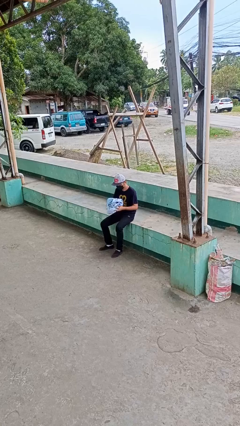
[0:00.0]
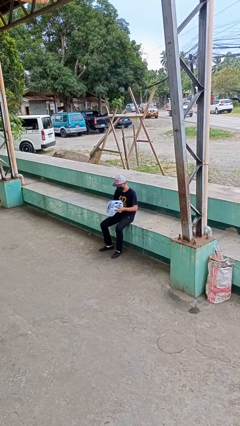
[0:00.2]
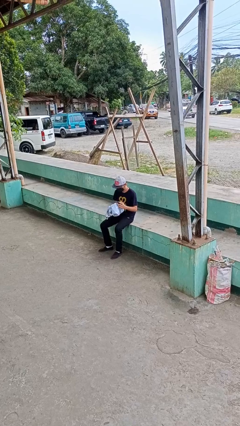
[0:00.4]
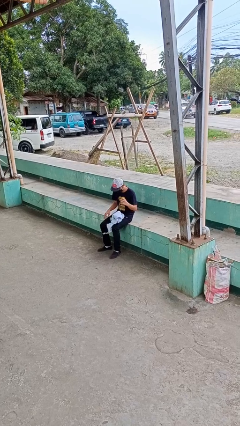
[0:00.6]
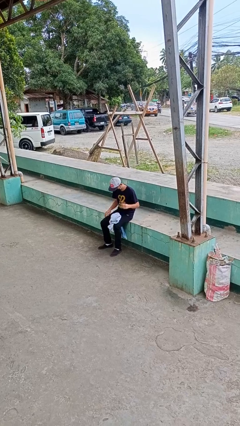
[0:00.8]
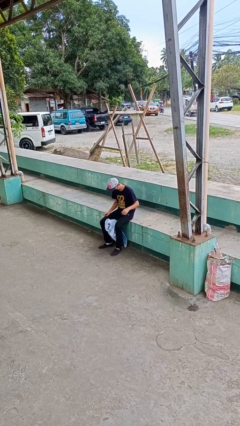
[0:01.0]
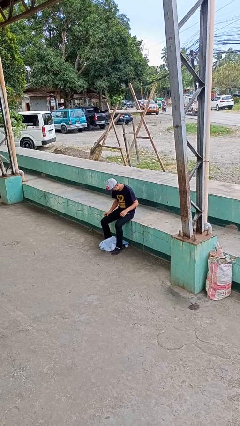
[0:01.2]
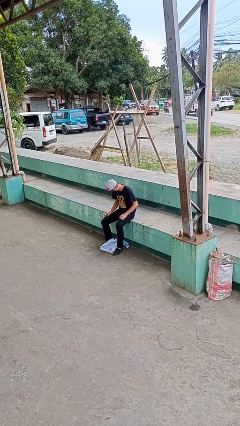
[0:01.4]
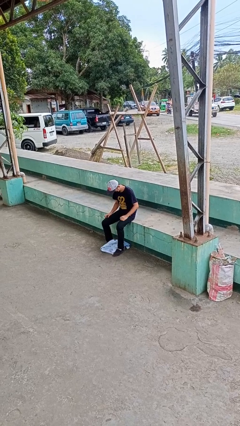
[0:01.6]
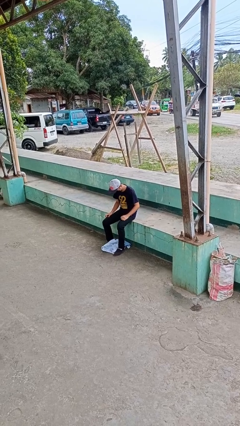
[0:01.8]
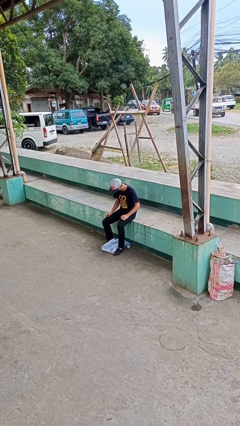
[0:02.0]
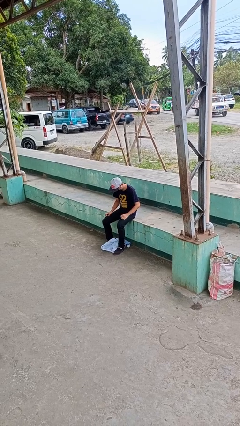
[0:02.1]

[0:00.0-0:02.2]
person drops object

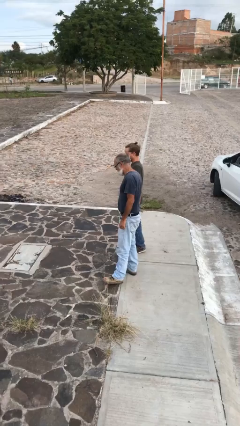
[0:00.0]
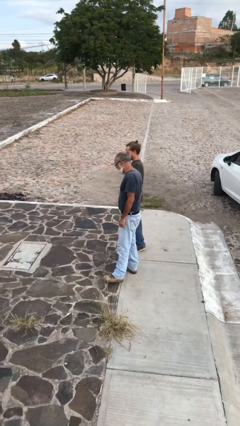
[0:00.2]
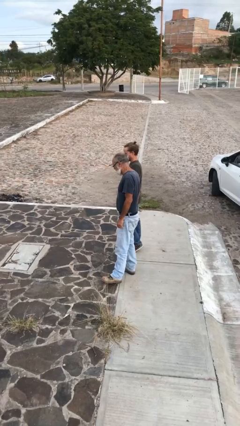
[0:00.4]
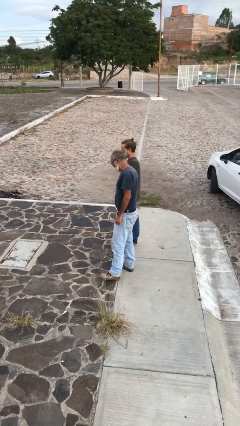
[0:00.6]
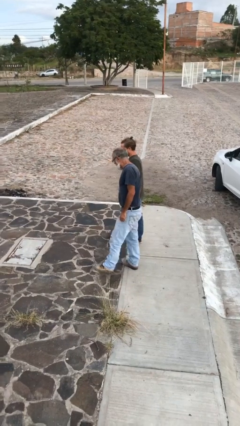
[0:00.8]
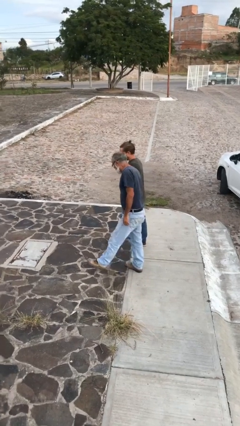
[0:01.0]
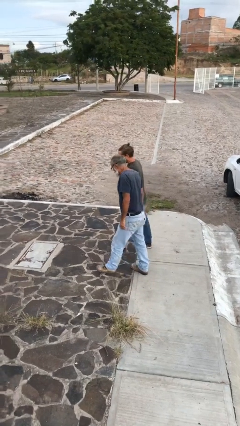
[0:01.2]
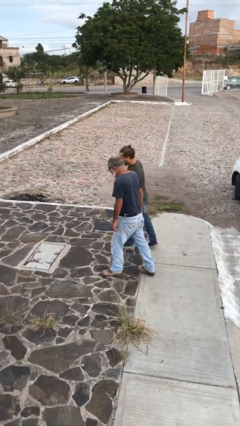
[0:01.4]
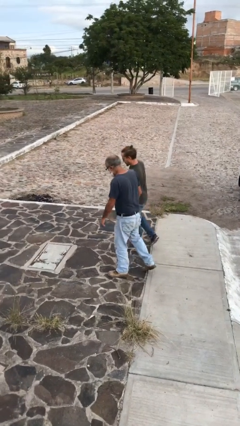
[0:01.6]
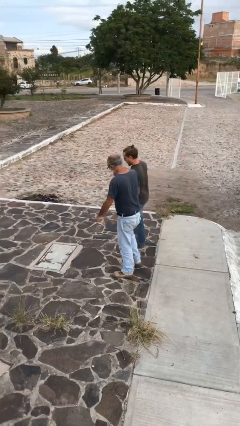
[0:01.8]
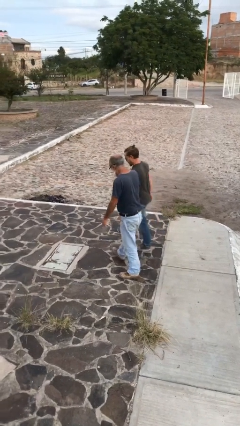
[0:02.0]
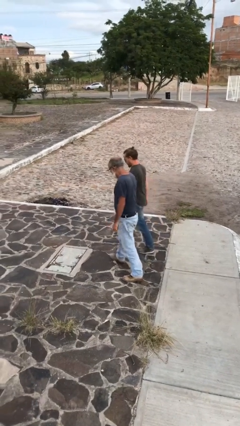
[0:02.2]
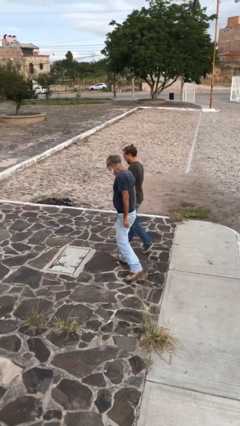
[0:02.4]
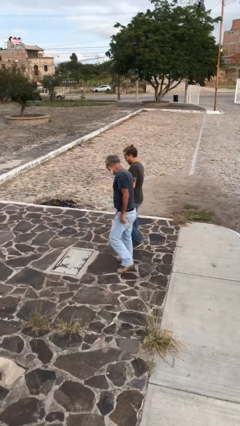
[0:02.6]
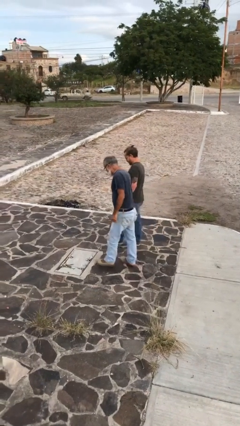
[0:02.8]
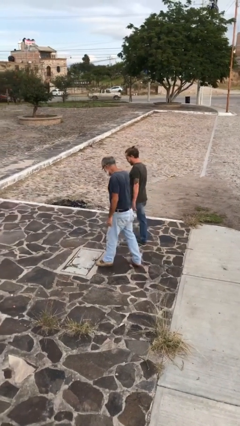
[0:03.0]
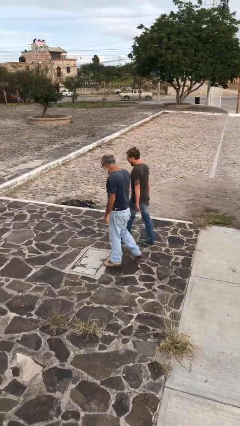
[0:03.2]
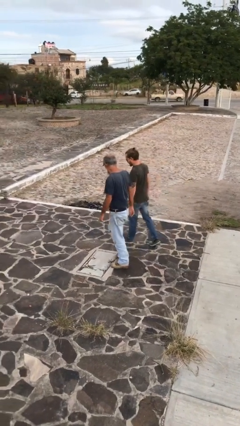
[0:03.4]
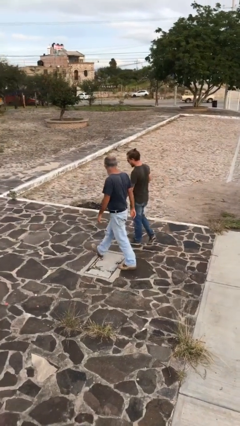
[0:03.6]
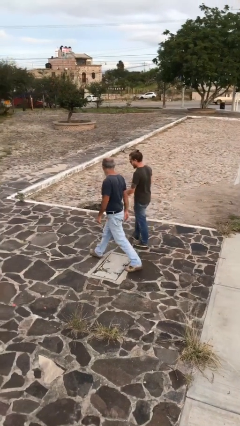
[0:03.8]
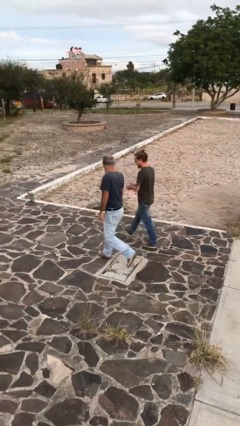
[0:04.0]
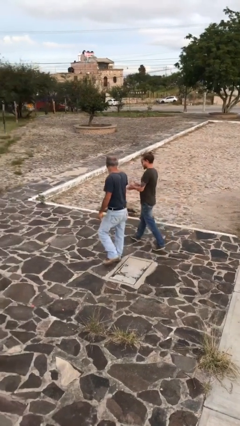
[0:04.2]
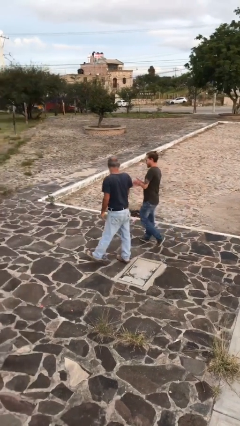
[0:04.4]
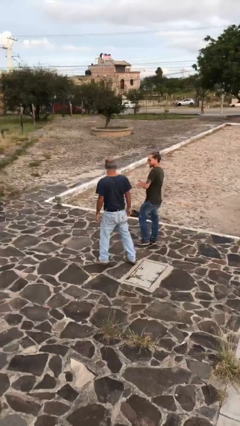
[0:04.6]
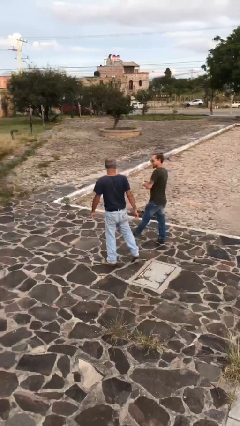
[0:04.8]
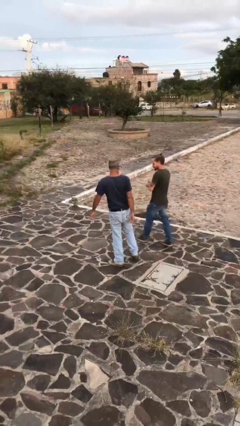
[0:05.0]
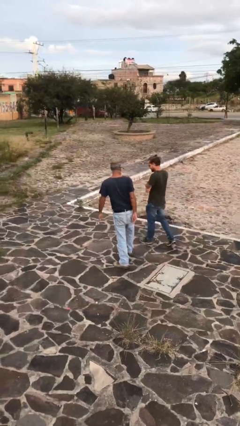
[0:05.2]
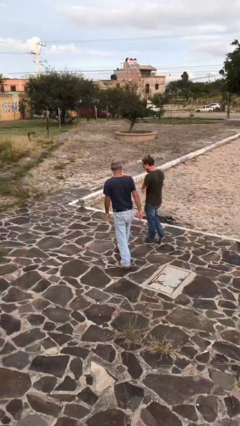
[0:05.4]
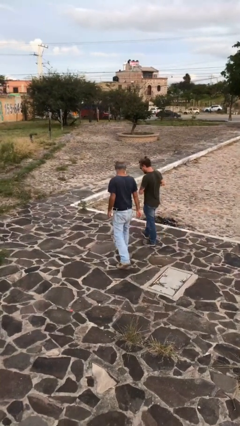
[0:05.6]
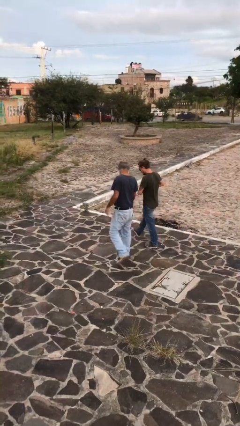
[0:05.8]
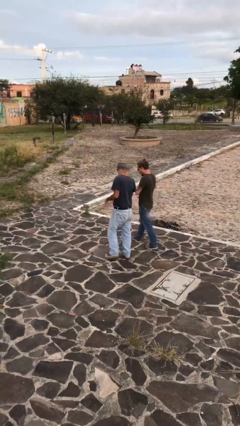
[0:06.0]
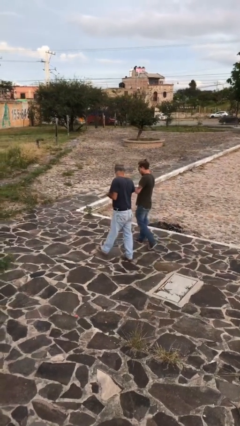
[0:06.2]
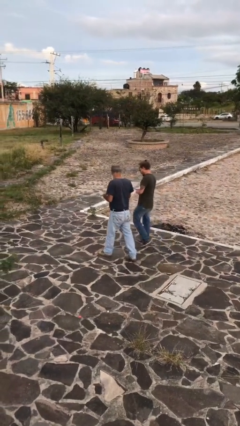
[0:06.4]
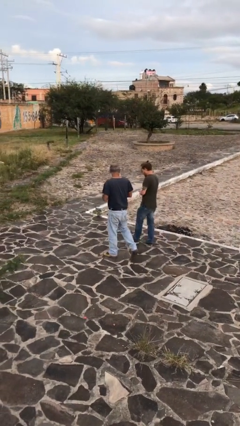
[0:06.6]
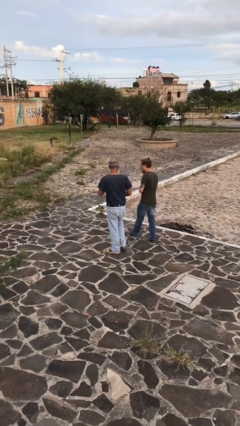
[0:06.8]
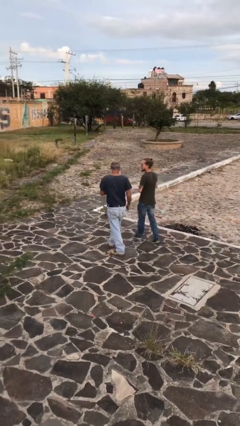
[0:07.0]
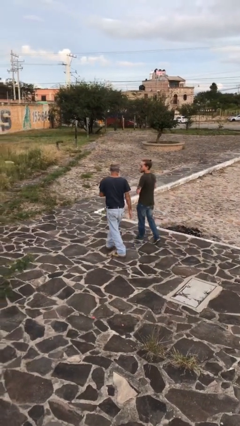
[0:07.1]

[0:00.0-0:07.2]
person talks to person

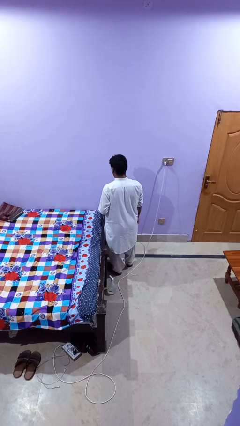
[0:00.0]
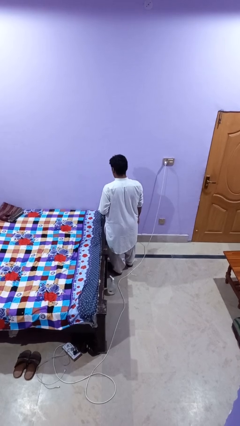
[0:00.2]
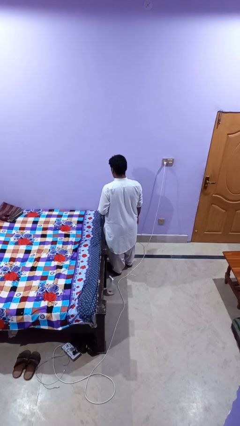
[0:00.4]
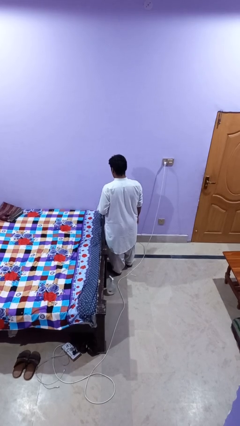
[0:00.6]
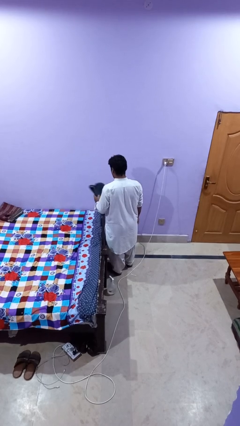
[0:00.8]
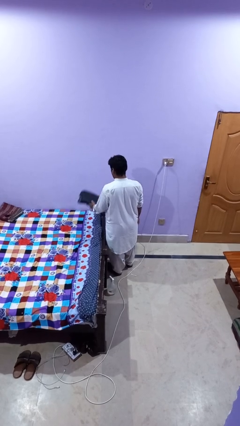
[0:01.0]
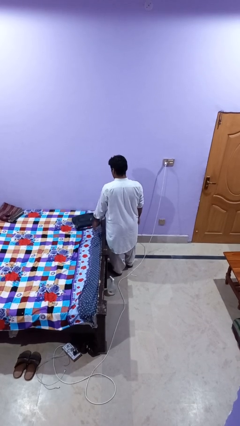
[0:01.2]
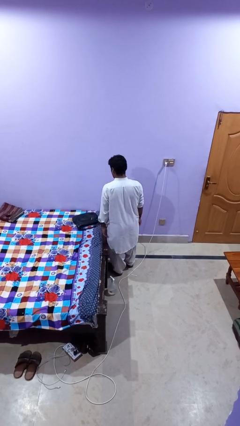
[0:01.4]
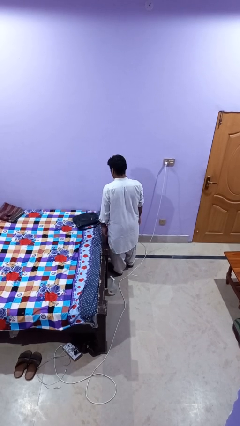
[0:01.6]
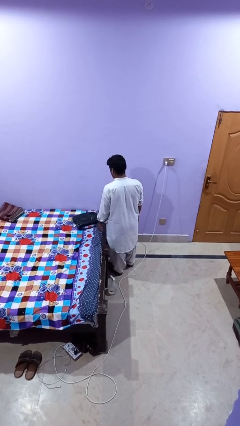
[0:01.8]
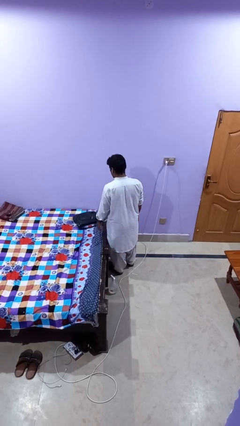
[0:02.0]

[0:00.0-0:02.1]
person throws object on bed

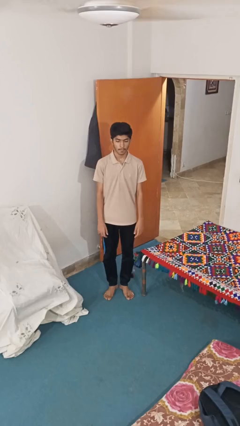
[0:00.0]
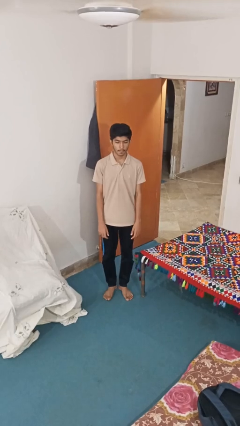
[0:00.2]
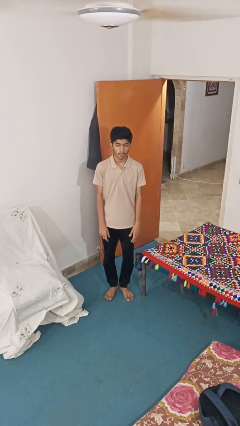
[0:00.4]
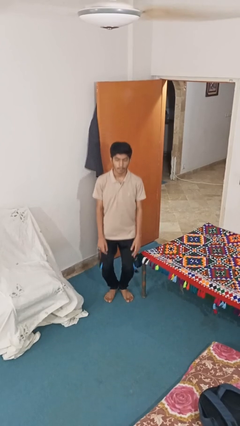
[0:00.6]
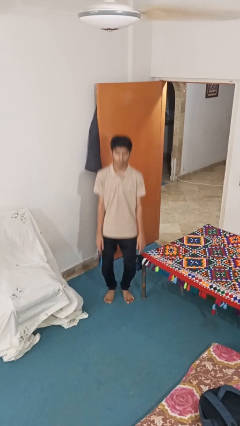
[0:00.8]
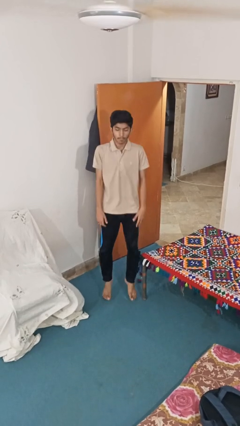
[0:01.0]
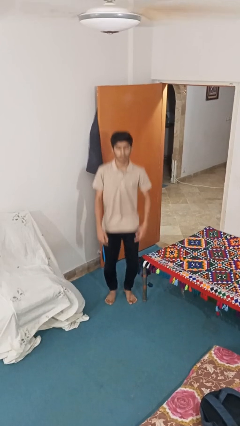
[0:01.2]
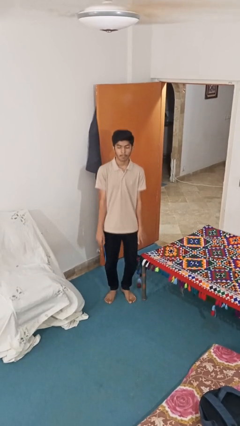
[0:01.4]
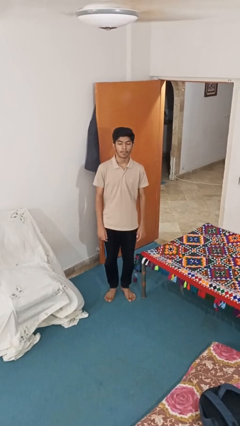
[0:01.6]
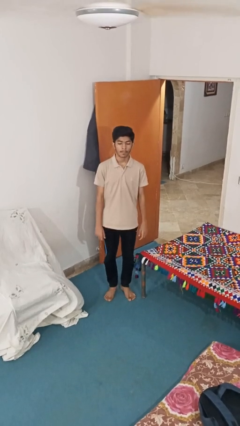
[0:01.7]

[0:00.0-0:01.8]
person jumps

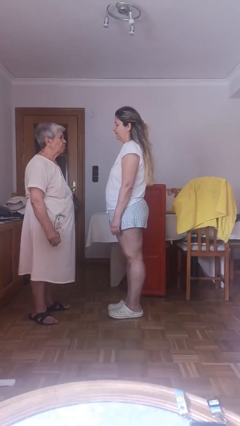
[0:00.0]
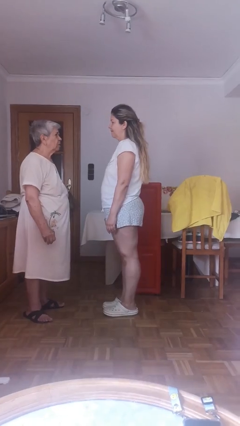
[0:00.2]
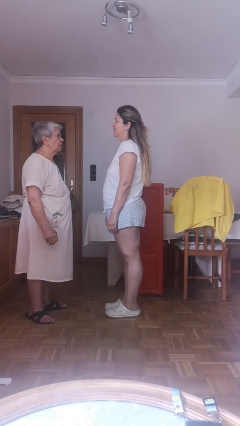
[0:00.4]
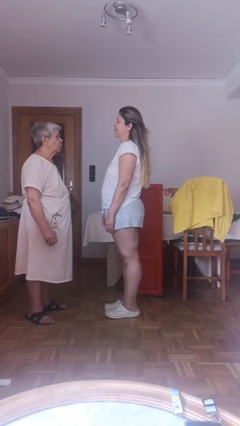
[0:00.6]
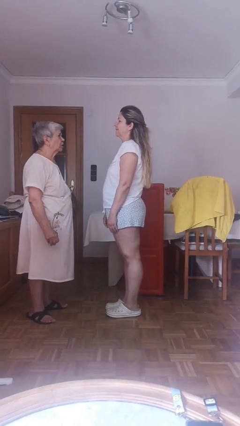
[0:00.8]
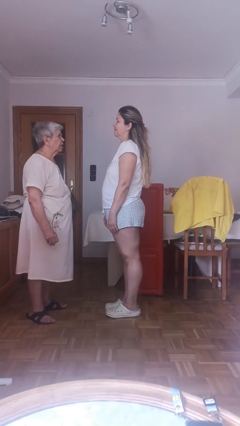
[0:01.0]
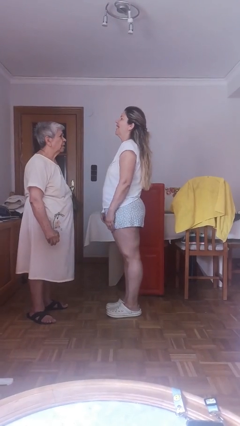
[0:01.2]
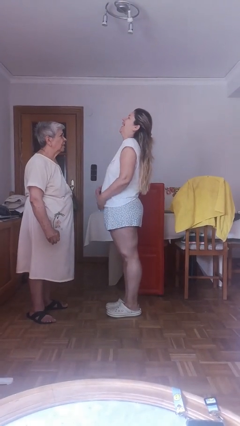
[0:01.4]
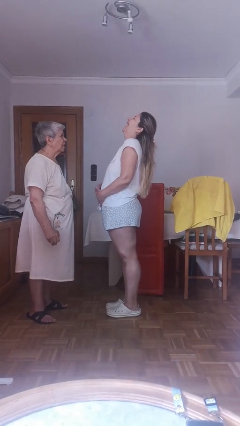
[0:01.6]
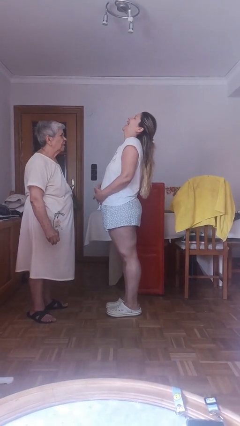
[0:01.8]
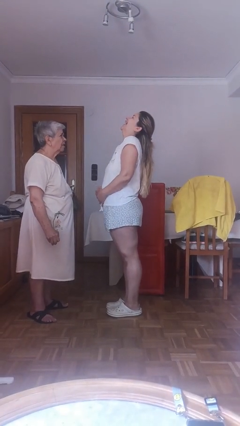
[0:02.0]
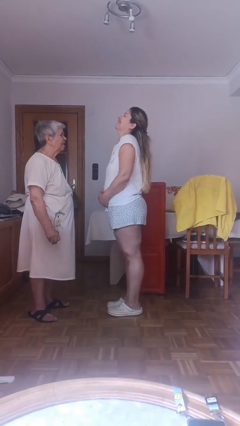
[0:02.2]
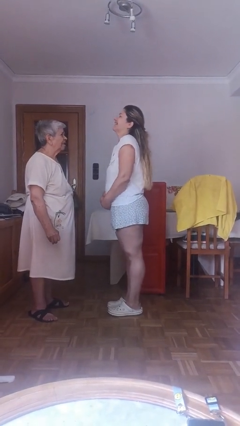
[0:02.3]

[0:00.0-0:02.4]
person laughs with person

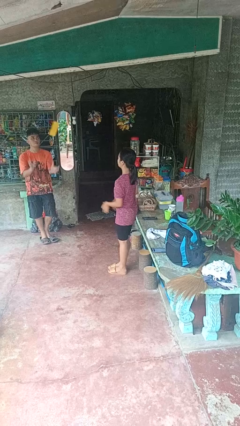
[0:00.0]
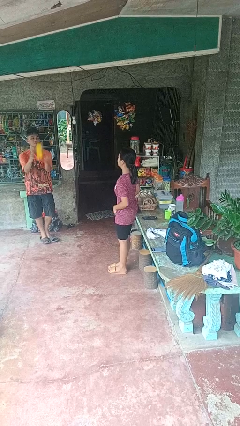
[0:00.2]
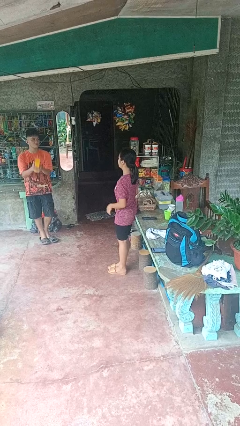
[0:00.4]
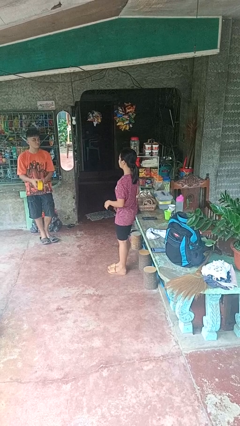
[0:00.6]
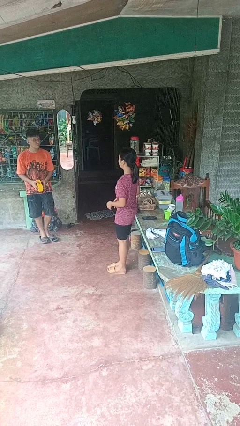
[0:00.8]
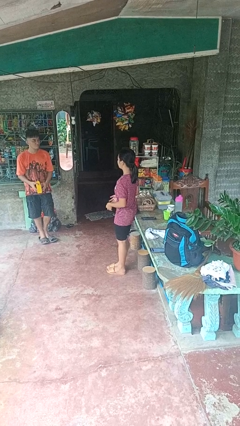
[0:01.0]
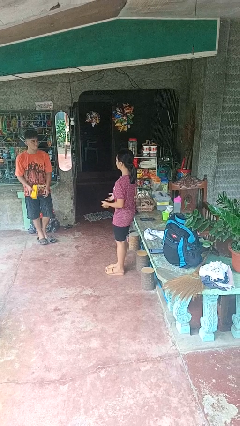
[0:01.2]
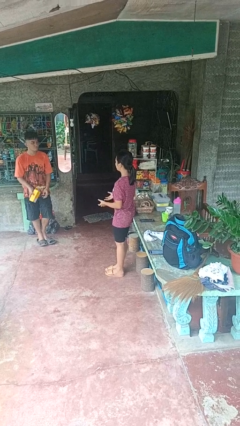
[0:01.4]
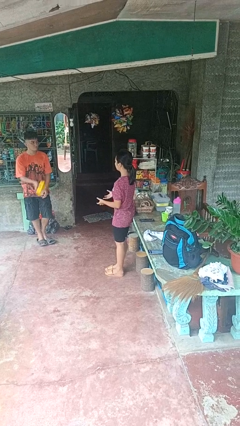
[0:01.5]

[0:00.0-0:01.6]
person throws object to person
